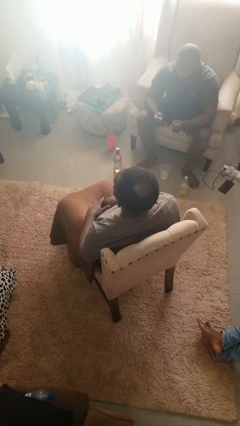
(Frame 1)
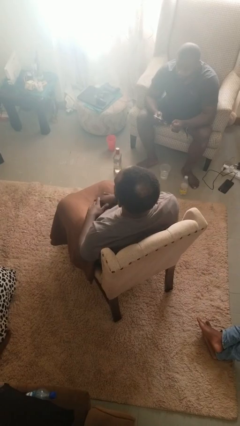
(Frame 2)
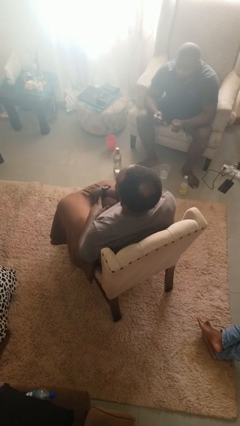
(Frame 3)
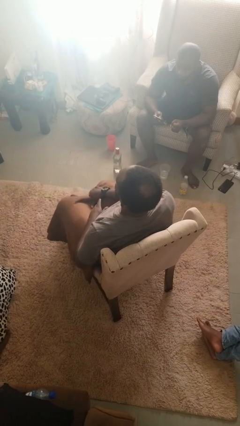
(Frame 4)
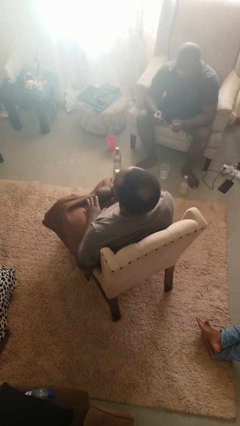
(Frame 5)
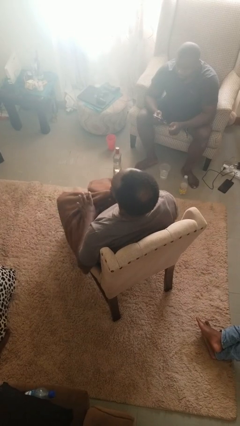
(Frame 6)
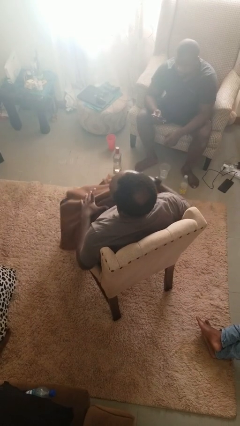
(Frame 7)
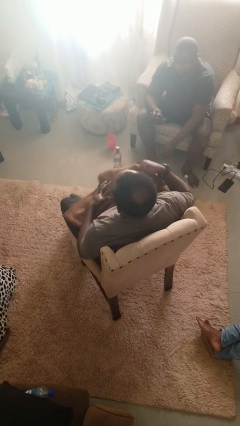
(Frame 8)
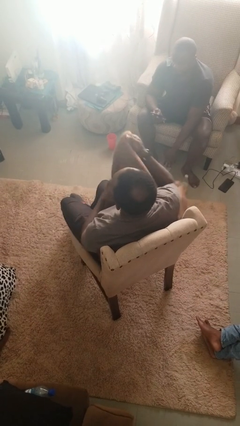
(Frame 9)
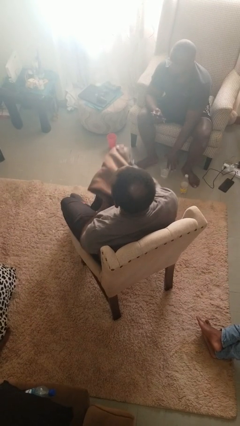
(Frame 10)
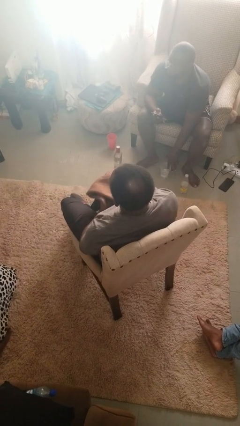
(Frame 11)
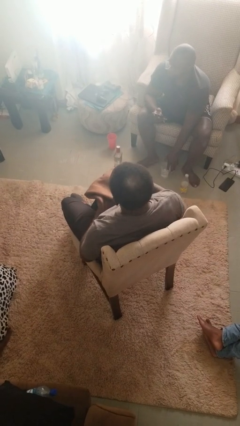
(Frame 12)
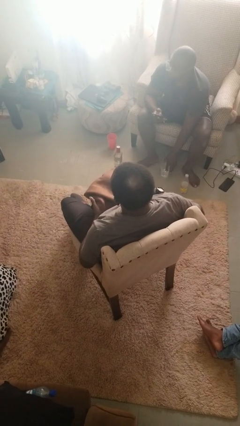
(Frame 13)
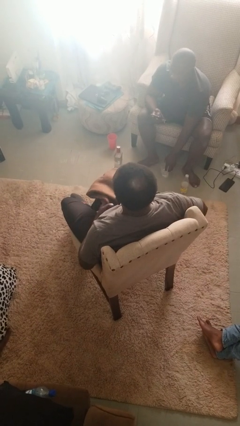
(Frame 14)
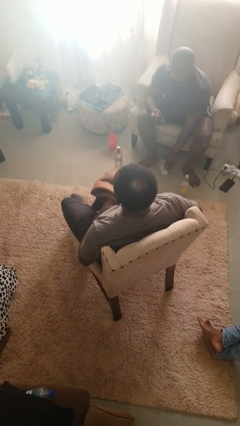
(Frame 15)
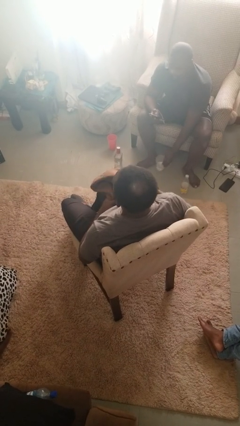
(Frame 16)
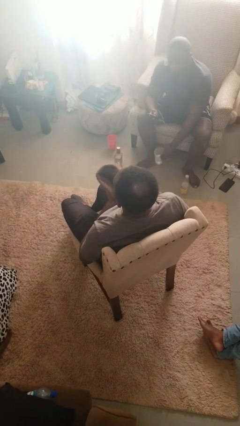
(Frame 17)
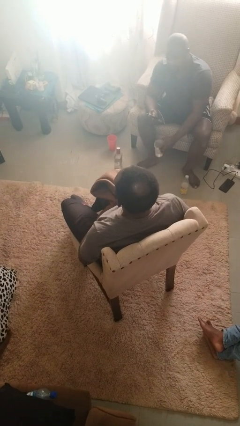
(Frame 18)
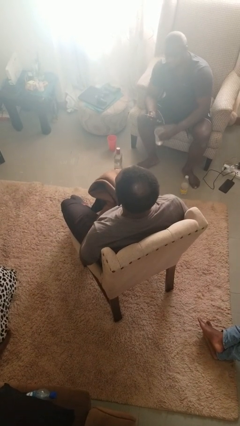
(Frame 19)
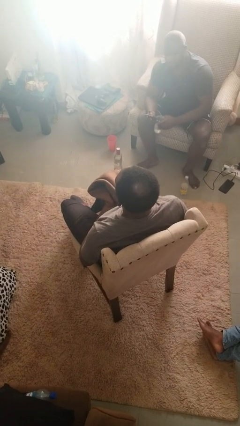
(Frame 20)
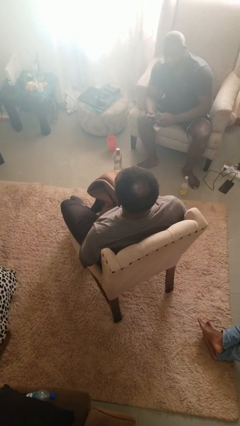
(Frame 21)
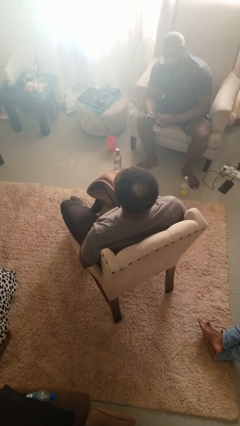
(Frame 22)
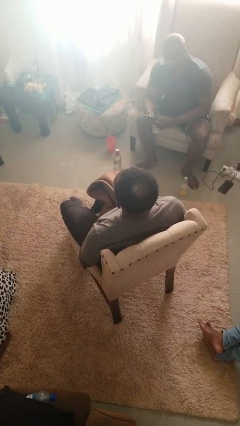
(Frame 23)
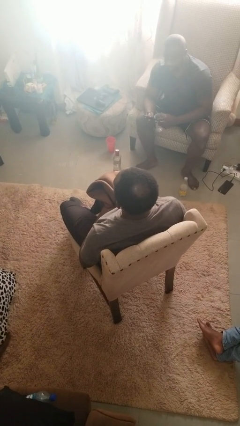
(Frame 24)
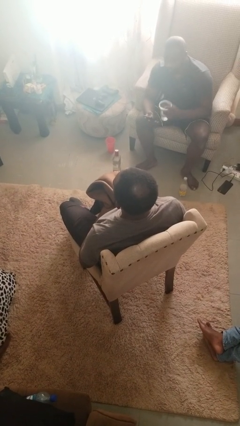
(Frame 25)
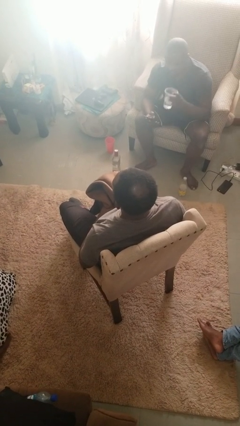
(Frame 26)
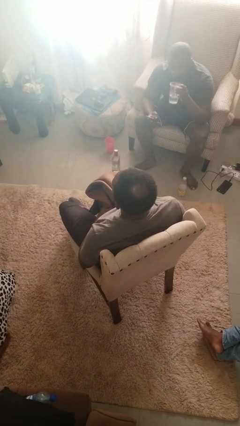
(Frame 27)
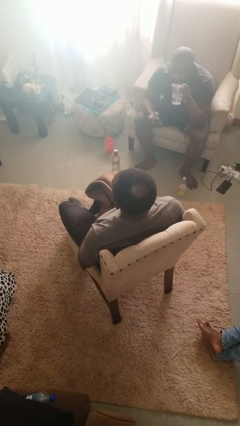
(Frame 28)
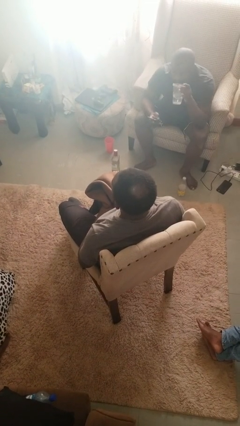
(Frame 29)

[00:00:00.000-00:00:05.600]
person uncovers with blanket

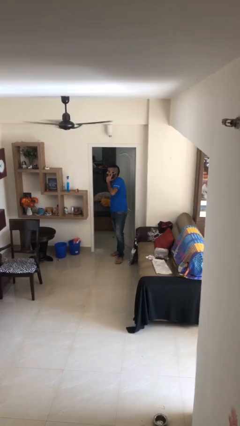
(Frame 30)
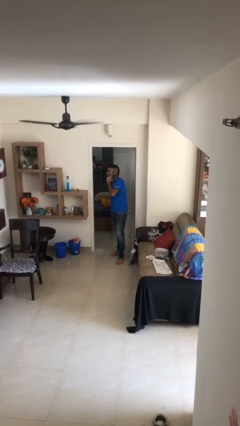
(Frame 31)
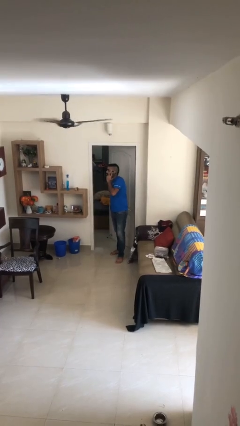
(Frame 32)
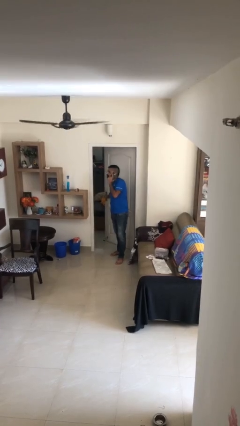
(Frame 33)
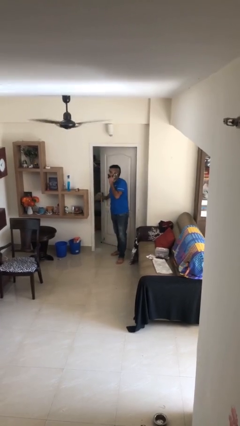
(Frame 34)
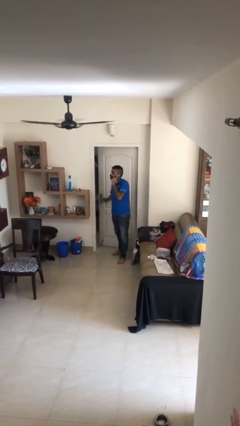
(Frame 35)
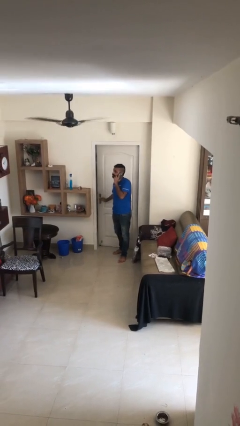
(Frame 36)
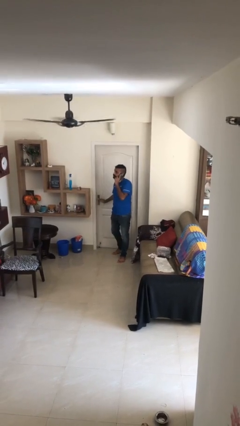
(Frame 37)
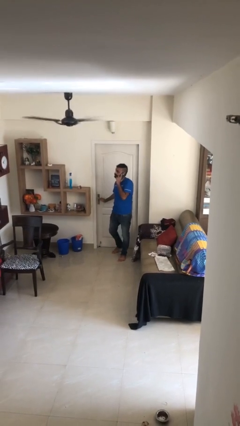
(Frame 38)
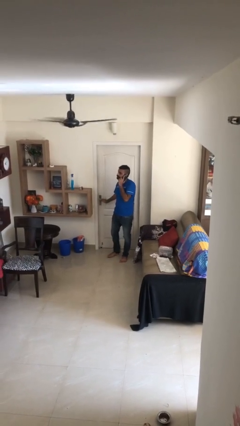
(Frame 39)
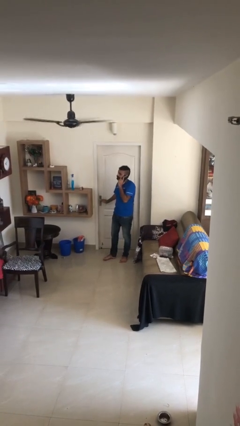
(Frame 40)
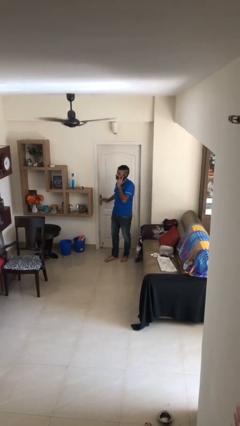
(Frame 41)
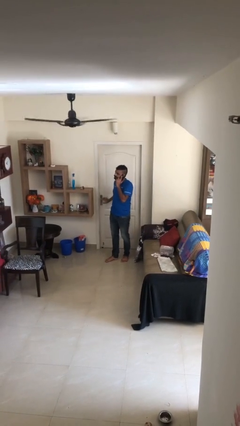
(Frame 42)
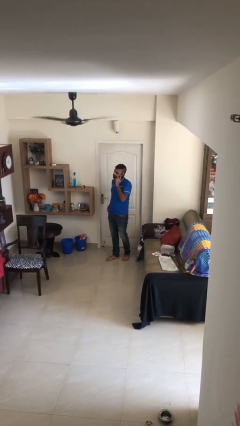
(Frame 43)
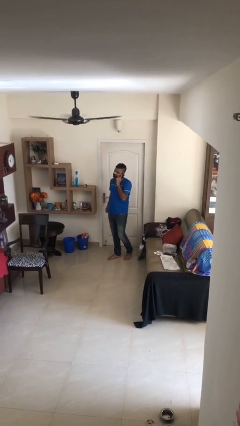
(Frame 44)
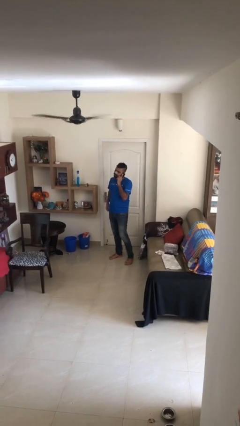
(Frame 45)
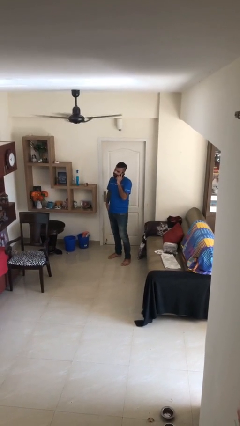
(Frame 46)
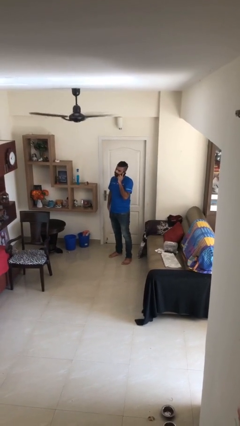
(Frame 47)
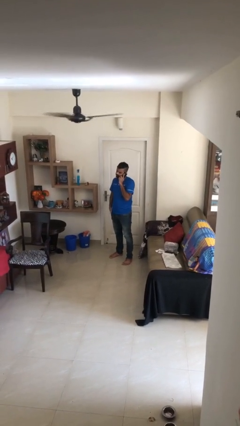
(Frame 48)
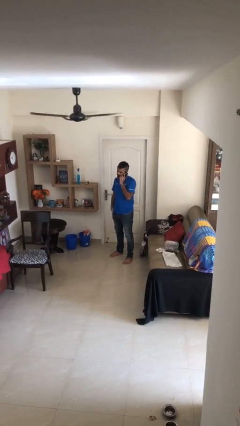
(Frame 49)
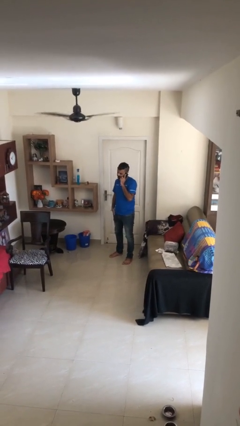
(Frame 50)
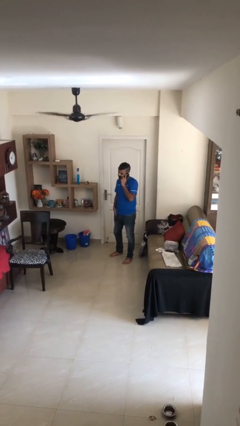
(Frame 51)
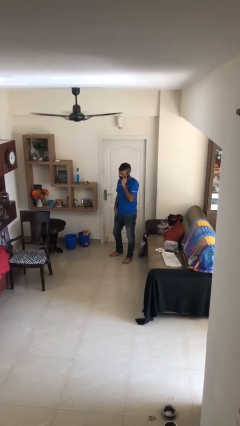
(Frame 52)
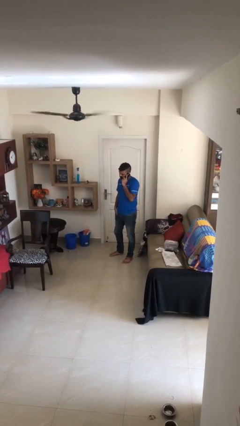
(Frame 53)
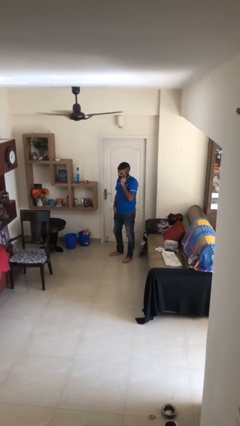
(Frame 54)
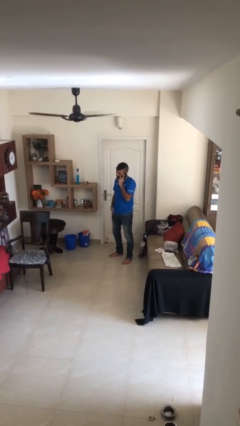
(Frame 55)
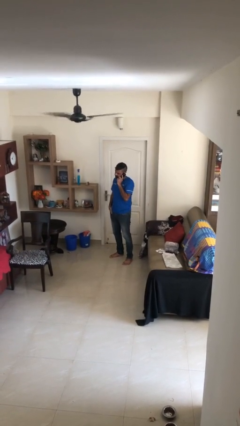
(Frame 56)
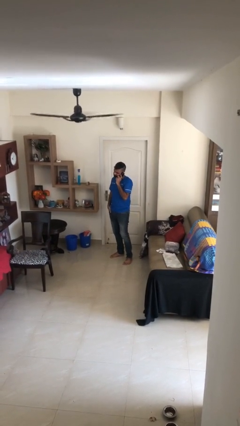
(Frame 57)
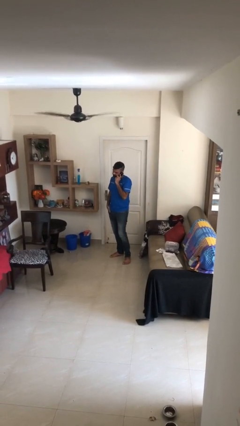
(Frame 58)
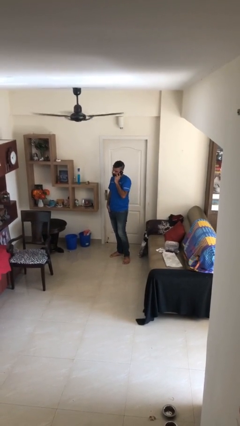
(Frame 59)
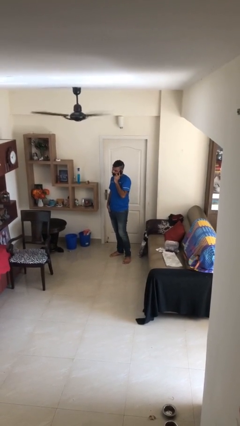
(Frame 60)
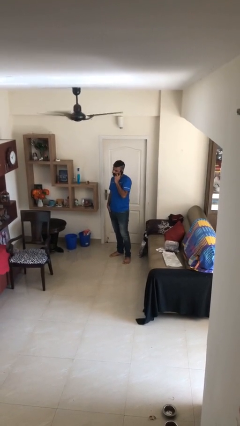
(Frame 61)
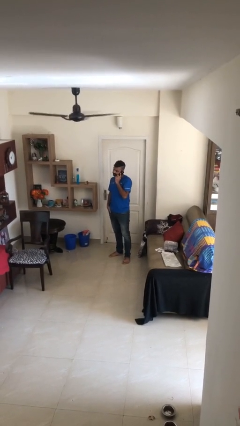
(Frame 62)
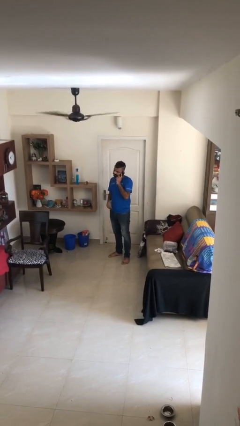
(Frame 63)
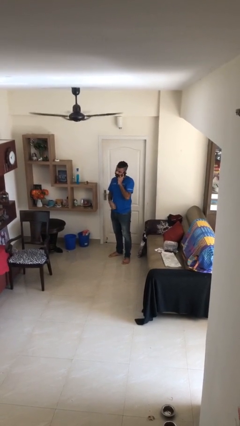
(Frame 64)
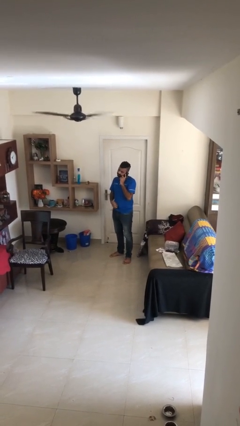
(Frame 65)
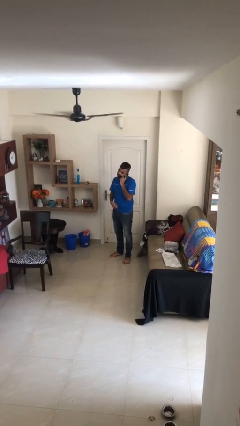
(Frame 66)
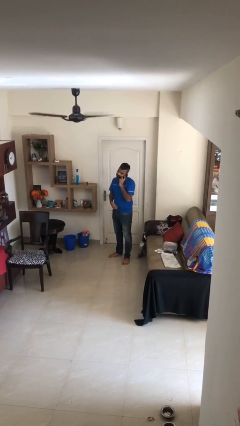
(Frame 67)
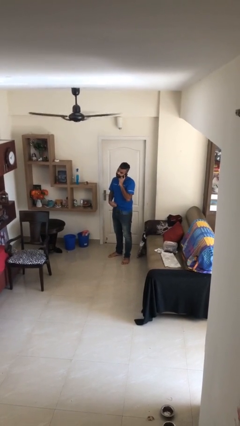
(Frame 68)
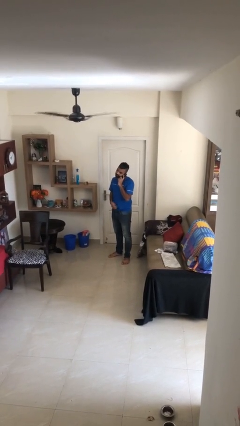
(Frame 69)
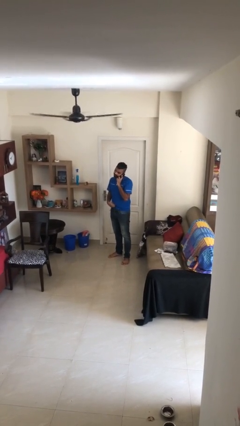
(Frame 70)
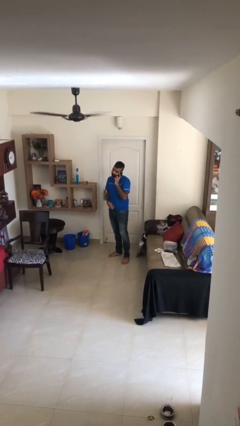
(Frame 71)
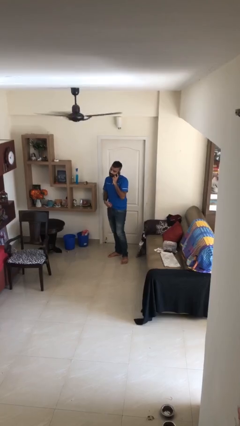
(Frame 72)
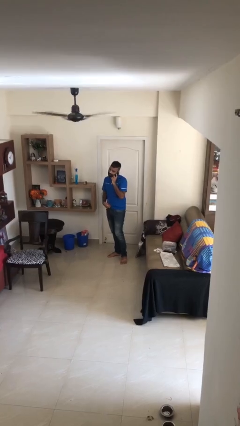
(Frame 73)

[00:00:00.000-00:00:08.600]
person closes facility door

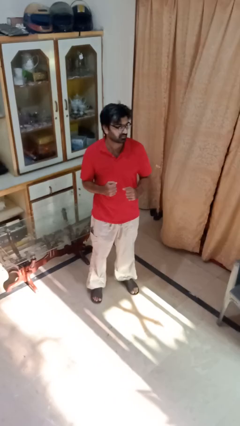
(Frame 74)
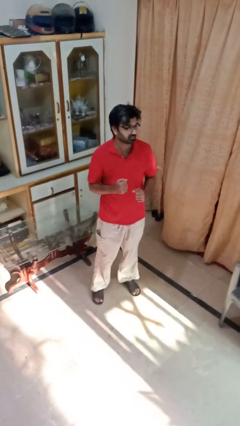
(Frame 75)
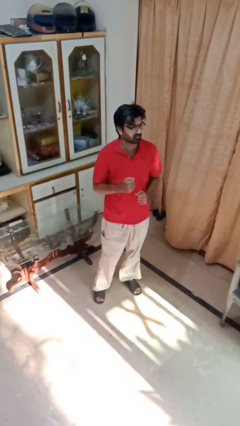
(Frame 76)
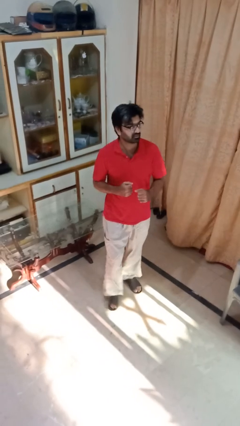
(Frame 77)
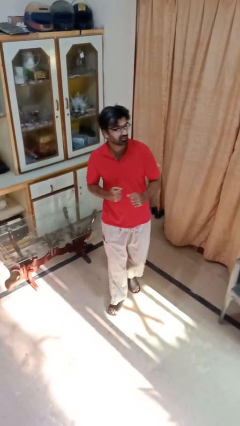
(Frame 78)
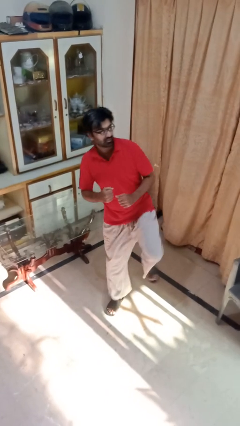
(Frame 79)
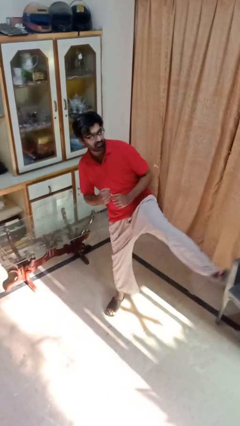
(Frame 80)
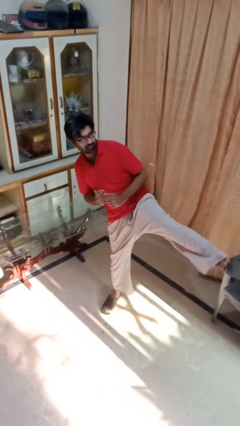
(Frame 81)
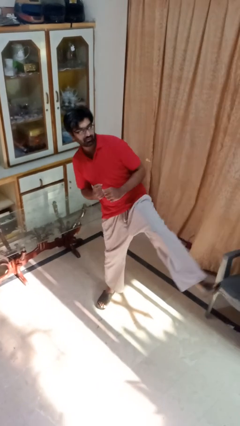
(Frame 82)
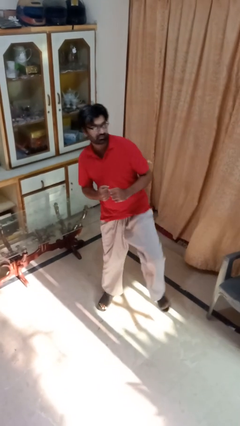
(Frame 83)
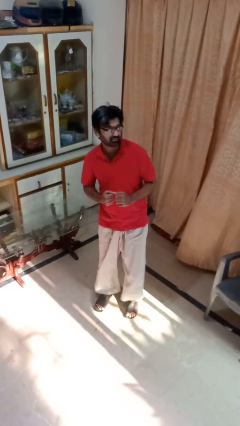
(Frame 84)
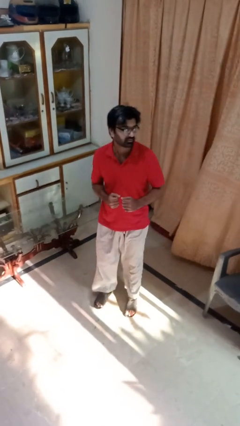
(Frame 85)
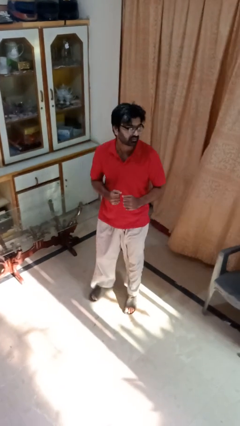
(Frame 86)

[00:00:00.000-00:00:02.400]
person karate kicks

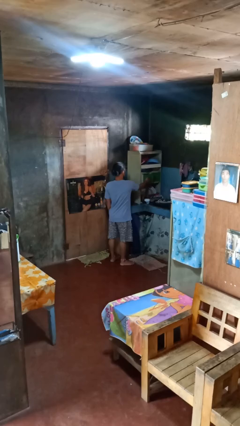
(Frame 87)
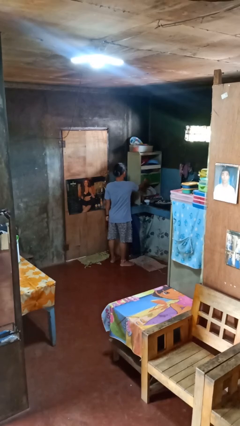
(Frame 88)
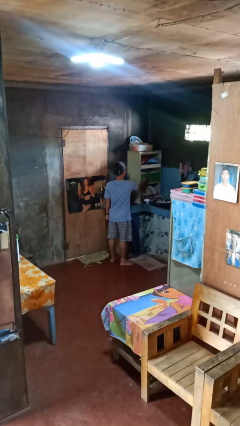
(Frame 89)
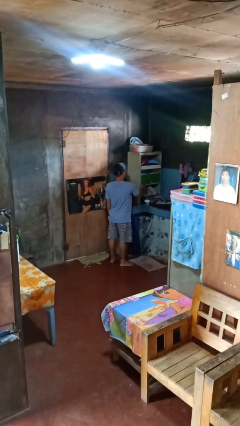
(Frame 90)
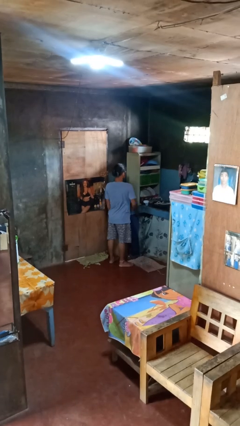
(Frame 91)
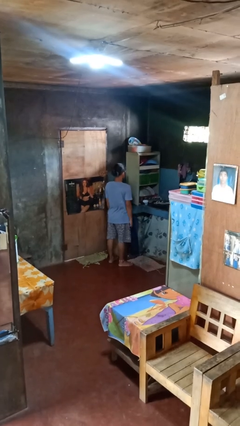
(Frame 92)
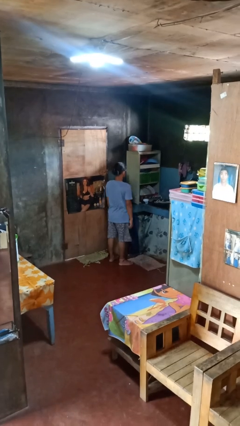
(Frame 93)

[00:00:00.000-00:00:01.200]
person closes kitchen drawer
